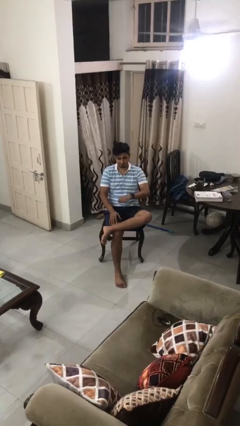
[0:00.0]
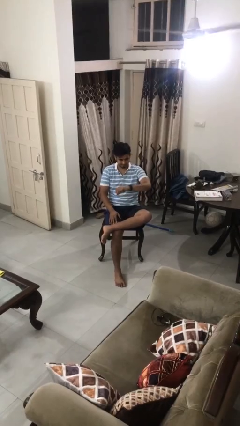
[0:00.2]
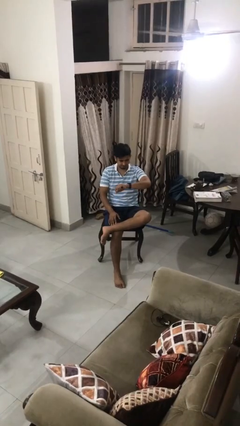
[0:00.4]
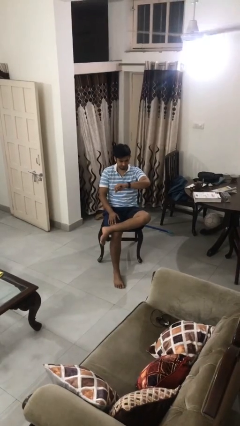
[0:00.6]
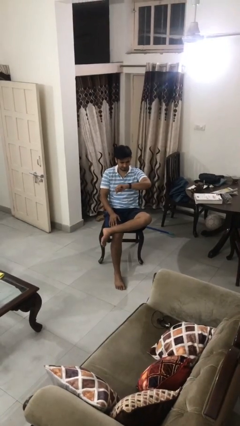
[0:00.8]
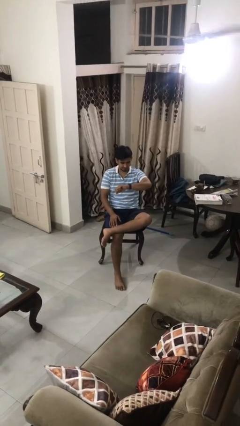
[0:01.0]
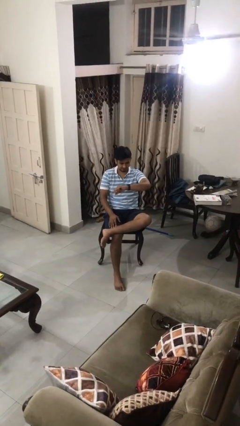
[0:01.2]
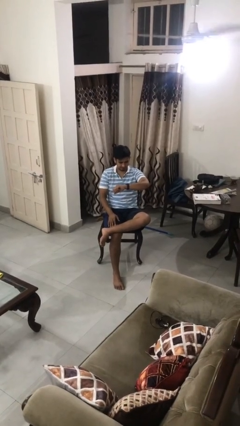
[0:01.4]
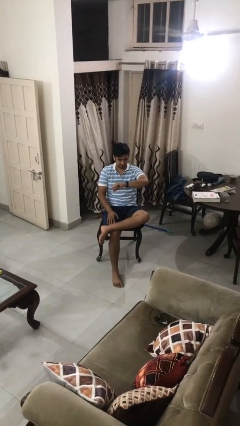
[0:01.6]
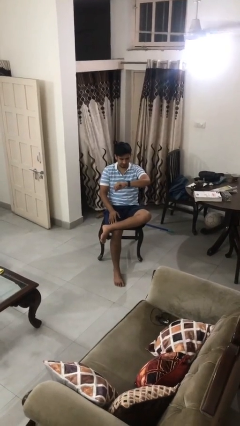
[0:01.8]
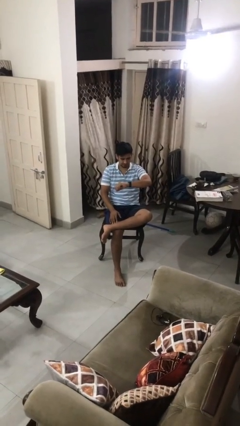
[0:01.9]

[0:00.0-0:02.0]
person looks at wristwatch

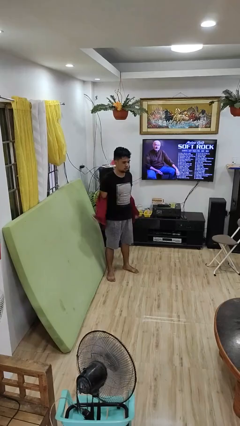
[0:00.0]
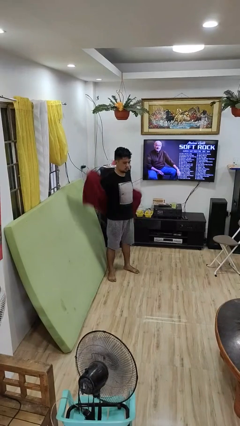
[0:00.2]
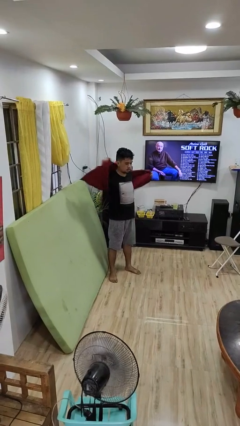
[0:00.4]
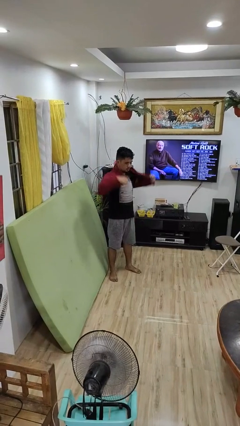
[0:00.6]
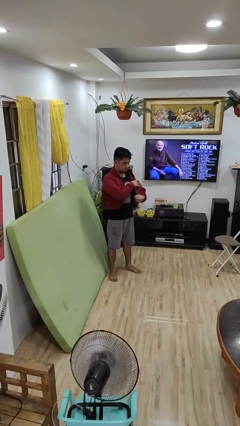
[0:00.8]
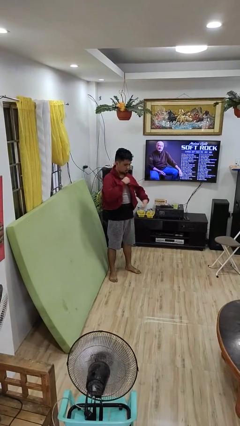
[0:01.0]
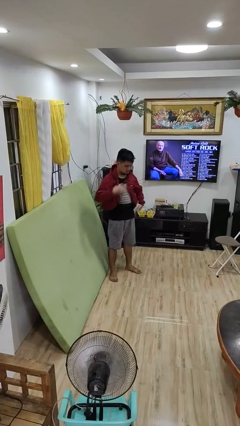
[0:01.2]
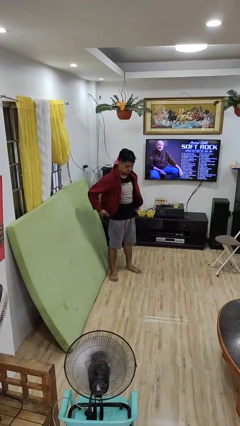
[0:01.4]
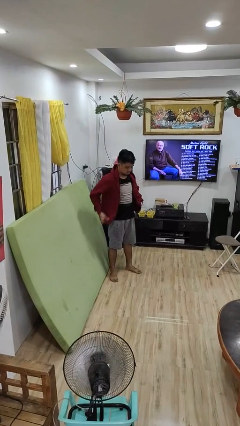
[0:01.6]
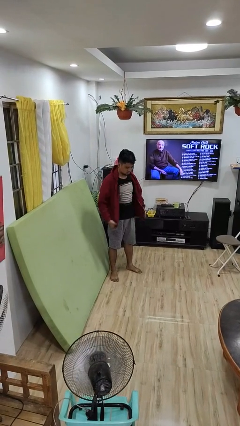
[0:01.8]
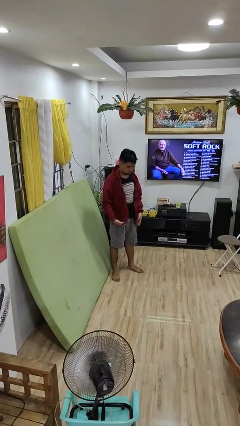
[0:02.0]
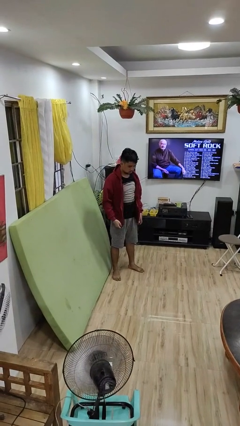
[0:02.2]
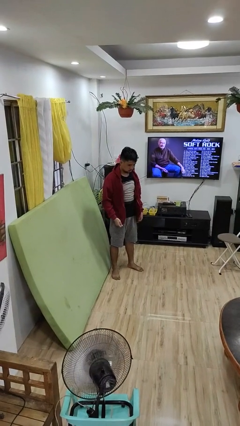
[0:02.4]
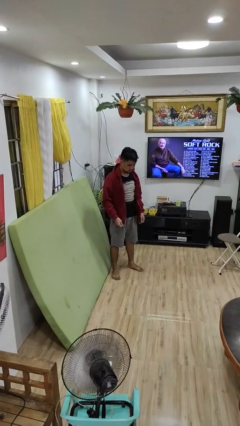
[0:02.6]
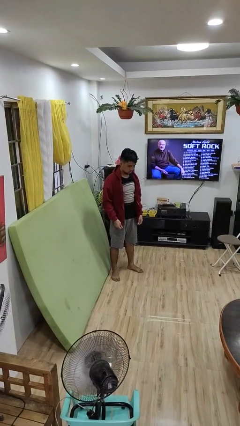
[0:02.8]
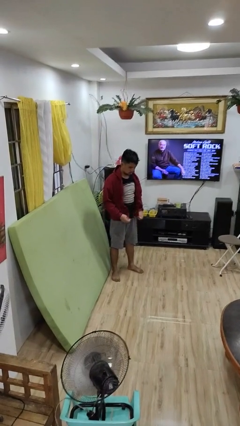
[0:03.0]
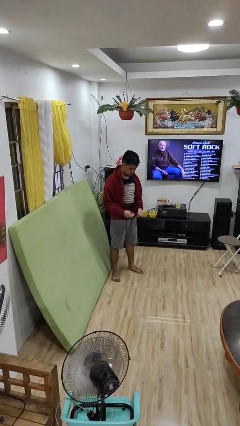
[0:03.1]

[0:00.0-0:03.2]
person puts on jacket

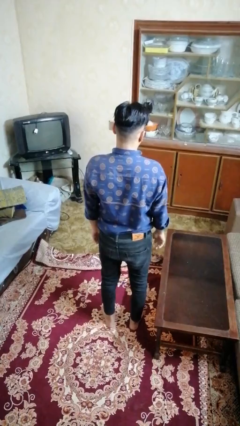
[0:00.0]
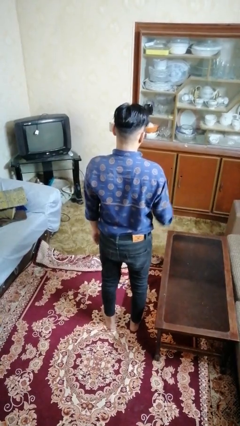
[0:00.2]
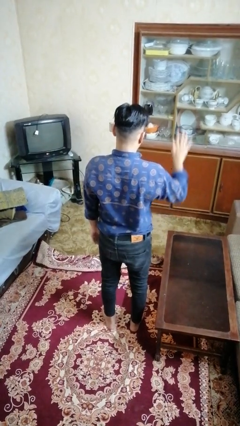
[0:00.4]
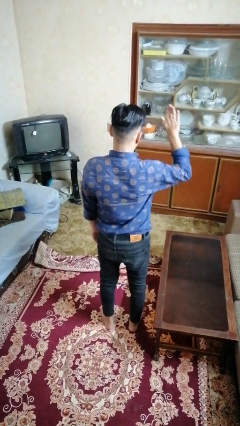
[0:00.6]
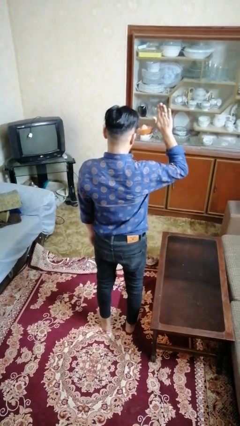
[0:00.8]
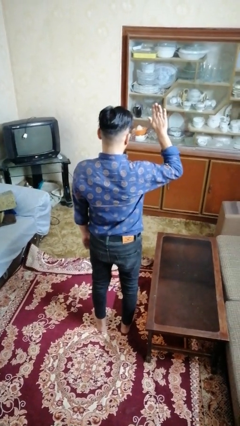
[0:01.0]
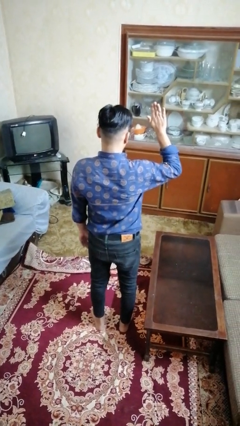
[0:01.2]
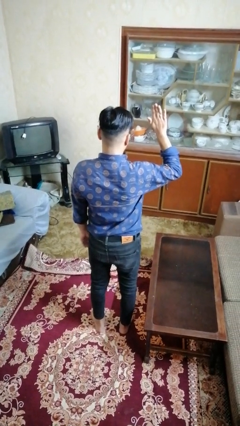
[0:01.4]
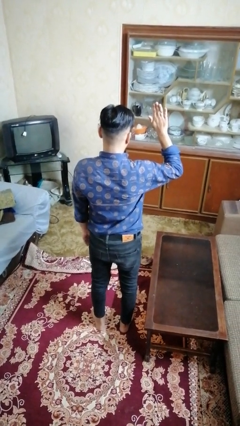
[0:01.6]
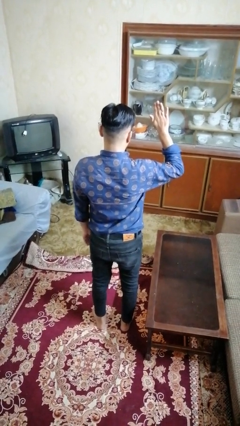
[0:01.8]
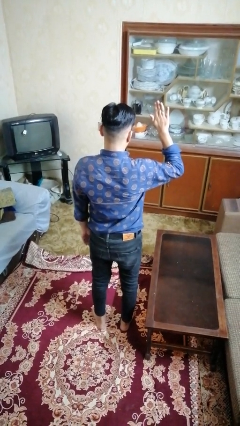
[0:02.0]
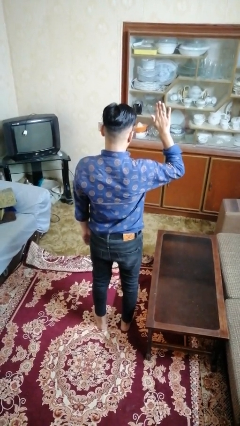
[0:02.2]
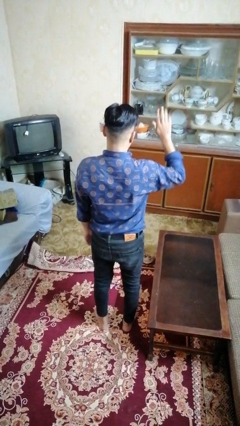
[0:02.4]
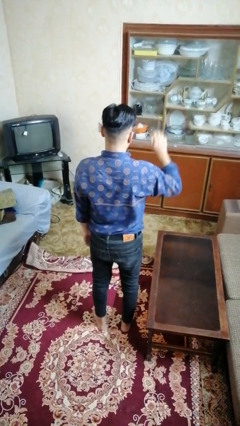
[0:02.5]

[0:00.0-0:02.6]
person gestures number five

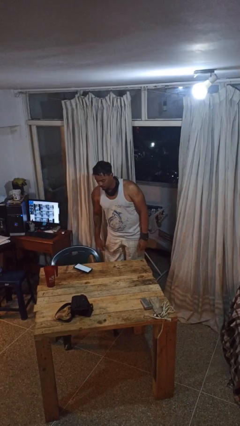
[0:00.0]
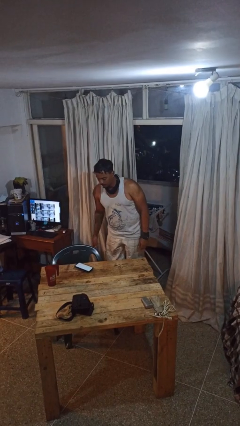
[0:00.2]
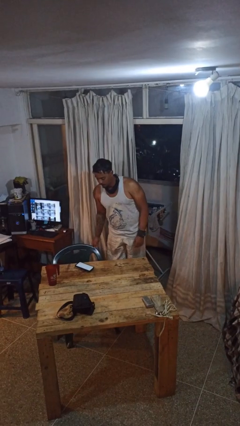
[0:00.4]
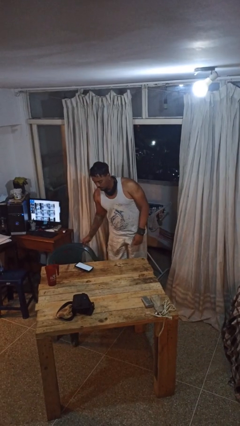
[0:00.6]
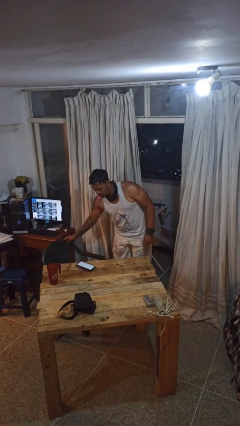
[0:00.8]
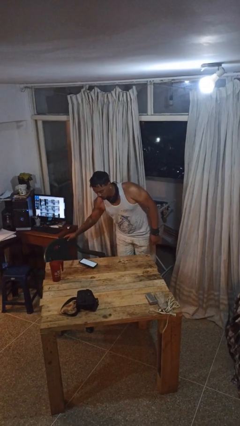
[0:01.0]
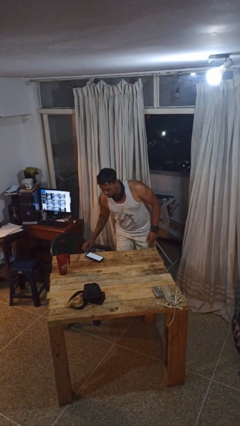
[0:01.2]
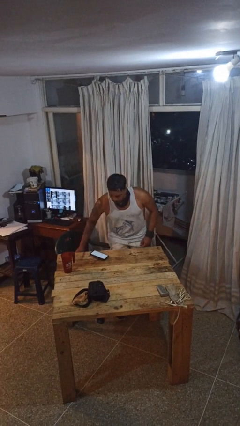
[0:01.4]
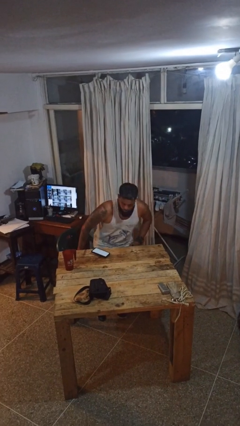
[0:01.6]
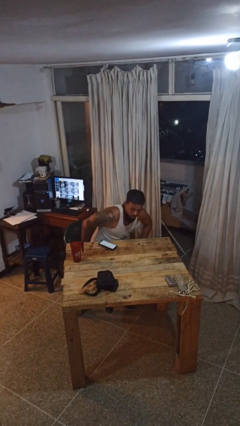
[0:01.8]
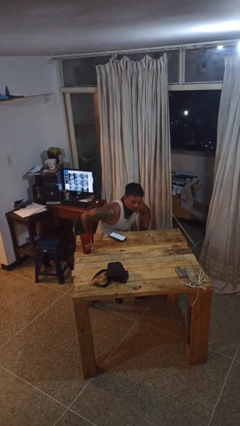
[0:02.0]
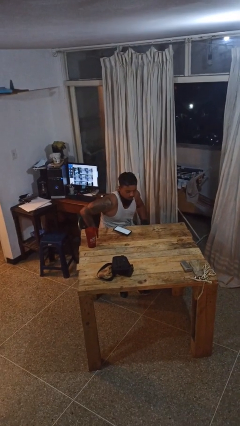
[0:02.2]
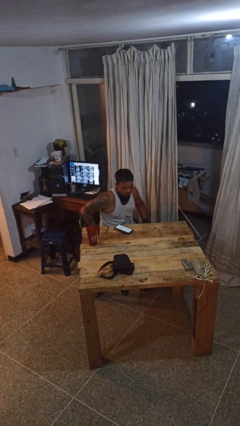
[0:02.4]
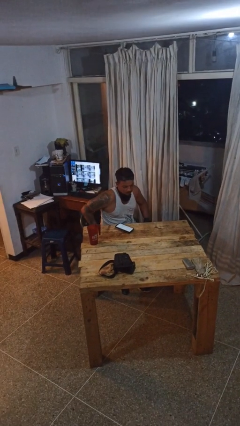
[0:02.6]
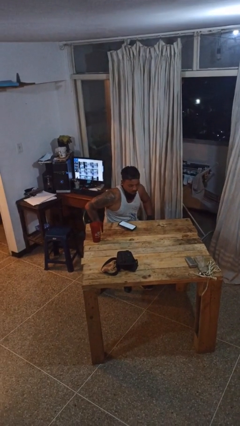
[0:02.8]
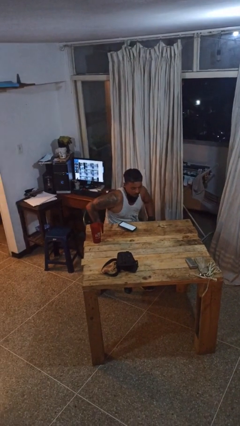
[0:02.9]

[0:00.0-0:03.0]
person sits down

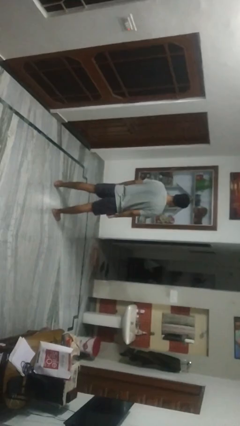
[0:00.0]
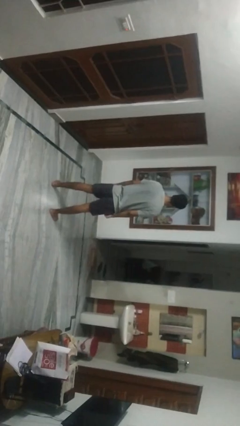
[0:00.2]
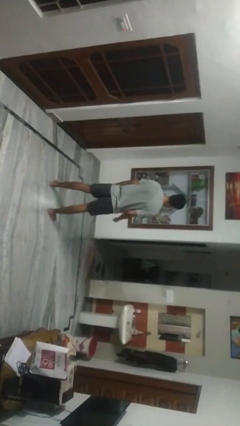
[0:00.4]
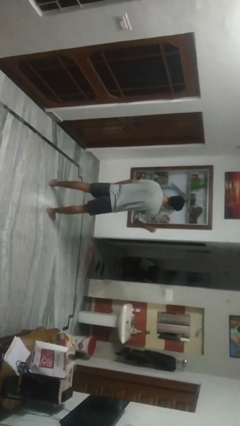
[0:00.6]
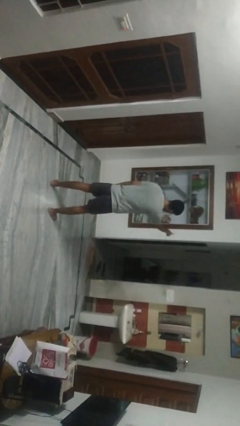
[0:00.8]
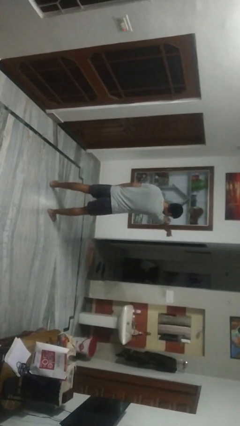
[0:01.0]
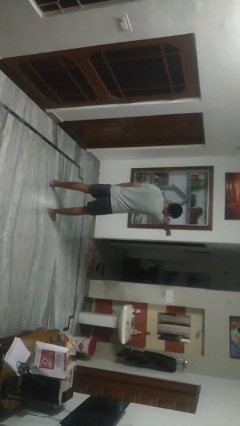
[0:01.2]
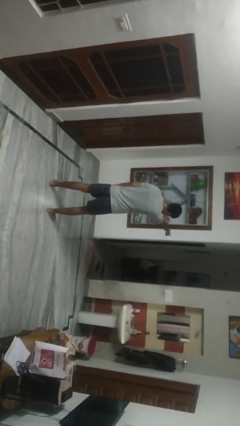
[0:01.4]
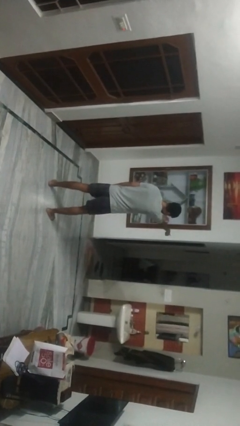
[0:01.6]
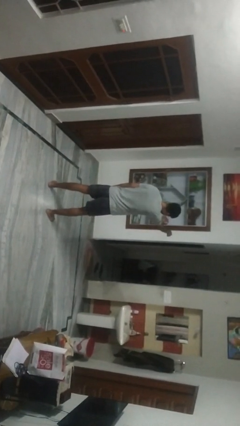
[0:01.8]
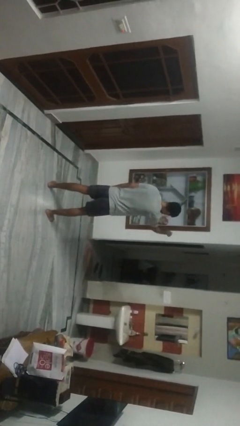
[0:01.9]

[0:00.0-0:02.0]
person points at person

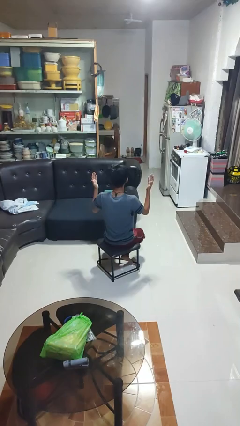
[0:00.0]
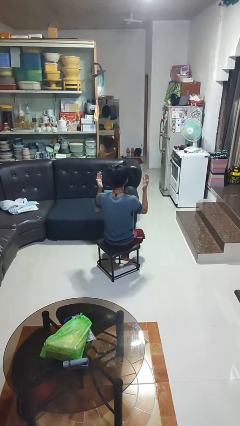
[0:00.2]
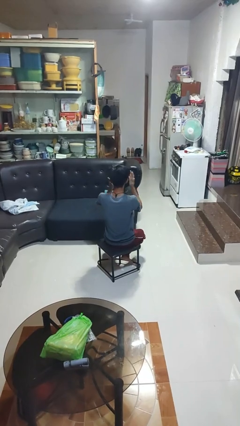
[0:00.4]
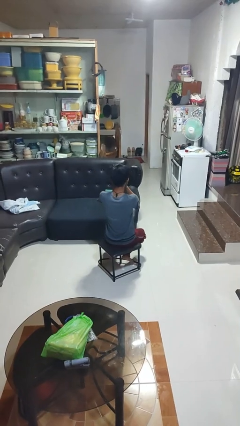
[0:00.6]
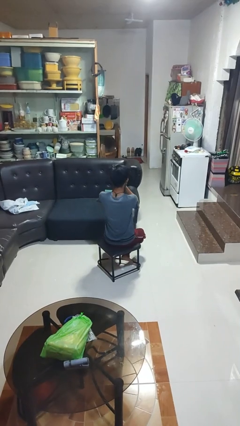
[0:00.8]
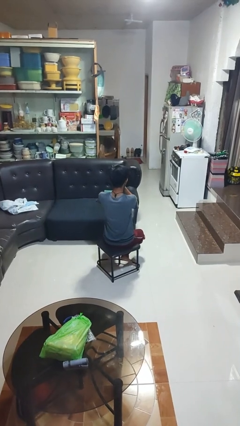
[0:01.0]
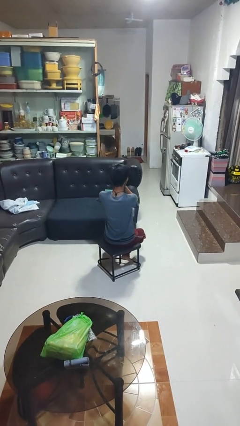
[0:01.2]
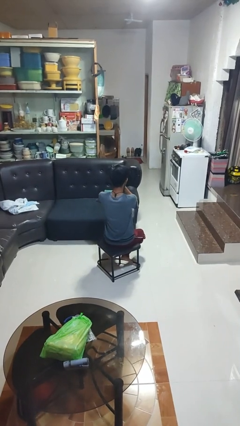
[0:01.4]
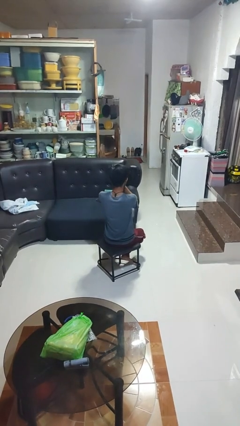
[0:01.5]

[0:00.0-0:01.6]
person covers face with hands

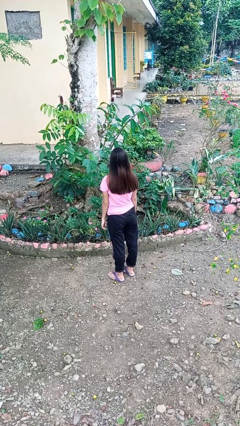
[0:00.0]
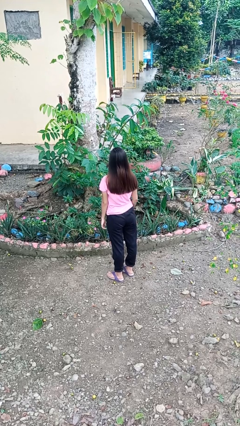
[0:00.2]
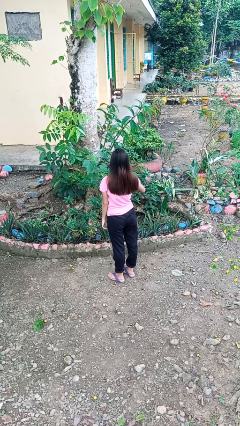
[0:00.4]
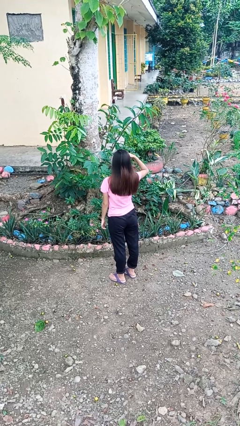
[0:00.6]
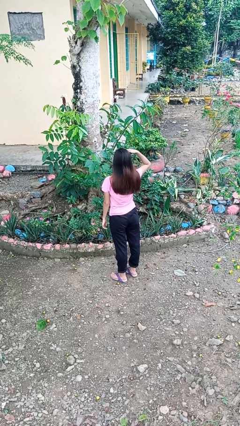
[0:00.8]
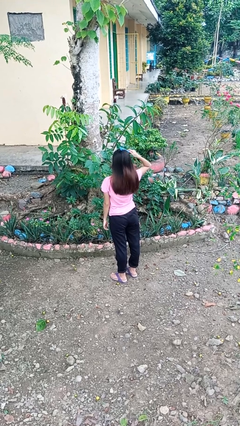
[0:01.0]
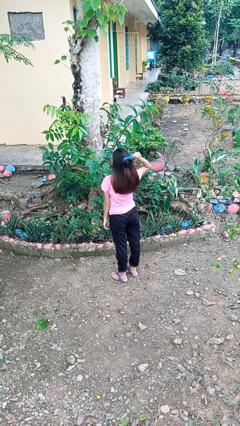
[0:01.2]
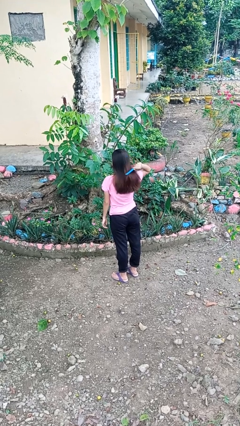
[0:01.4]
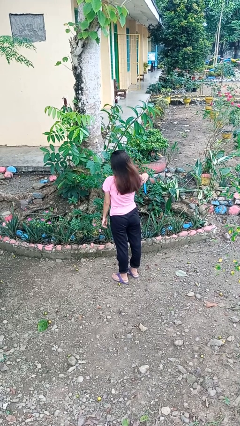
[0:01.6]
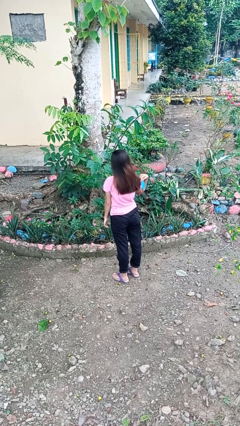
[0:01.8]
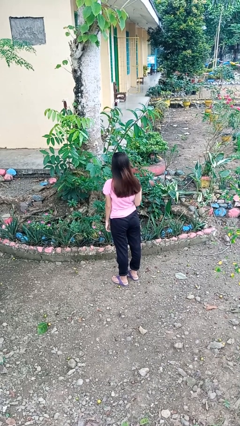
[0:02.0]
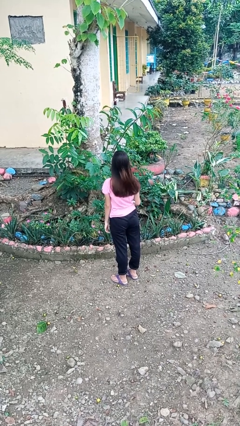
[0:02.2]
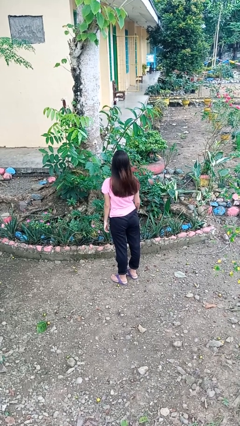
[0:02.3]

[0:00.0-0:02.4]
person brushes hair

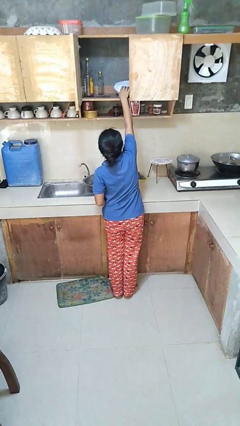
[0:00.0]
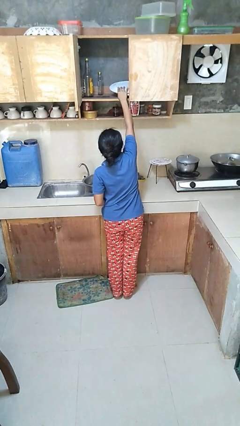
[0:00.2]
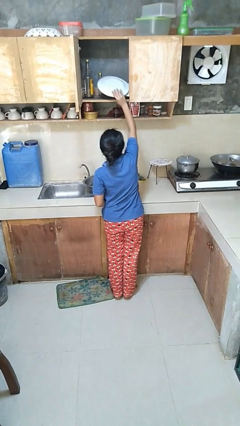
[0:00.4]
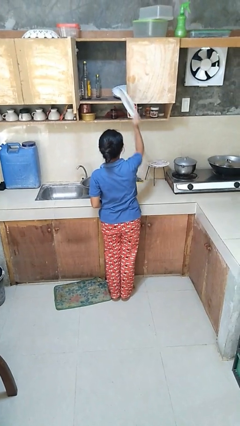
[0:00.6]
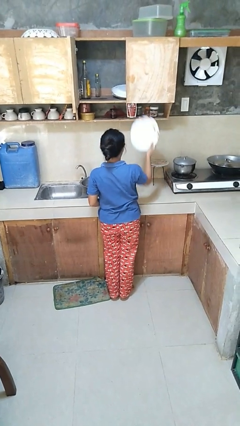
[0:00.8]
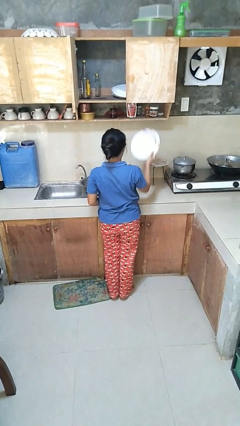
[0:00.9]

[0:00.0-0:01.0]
person takes object from cabinet
